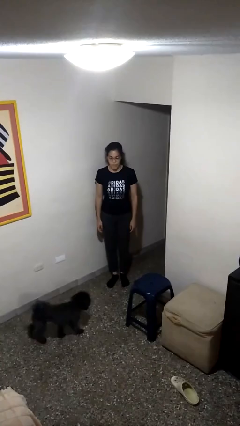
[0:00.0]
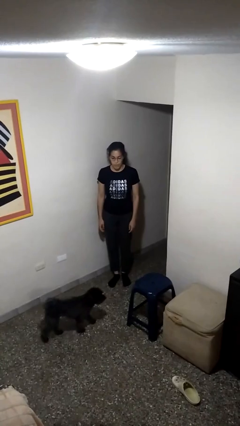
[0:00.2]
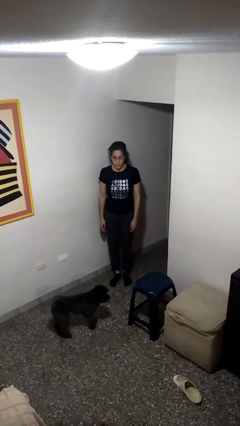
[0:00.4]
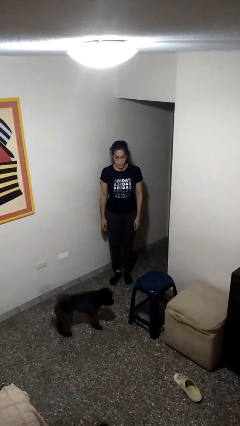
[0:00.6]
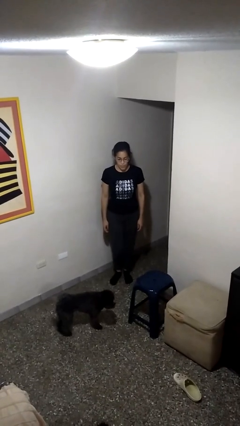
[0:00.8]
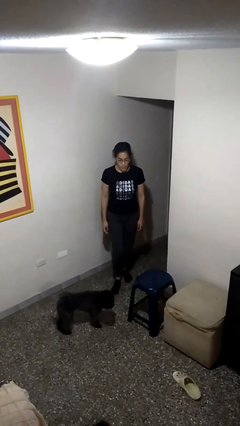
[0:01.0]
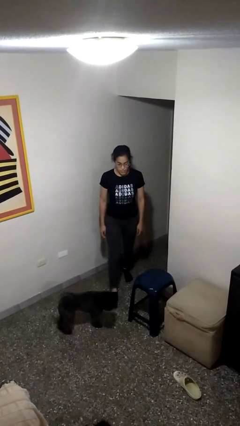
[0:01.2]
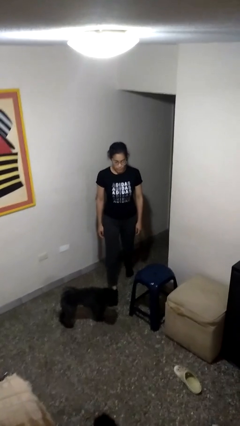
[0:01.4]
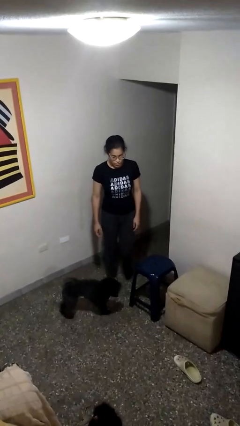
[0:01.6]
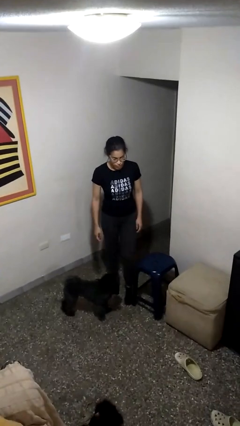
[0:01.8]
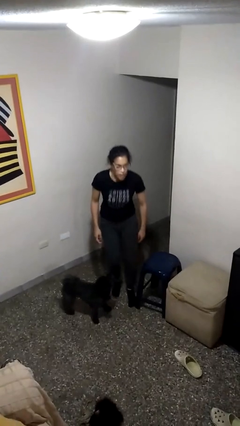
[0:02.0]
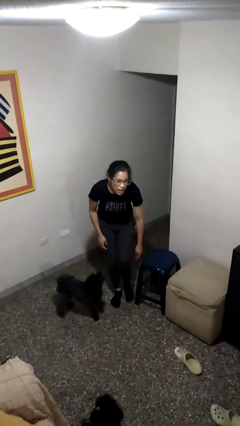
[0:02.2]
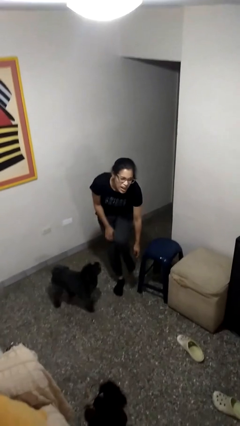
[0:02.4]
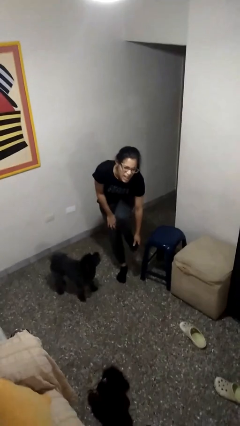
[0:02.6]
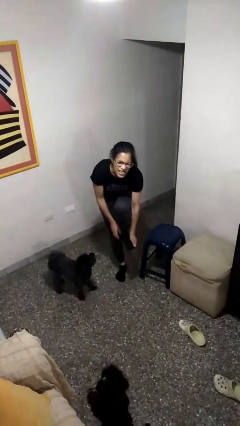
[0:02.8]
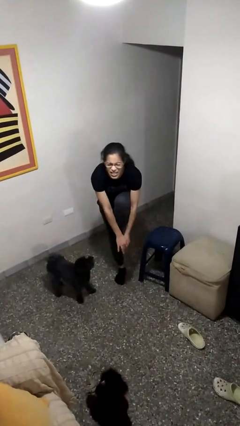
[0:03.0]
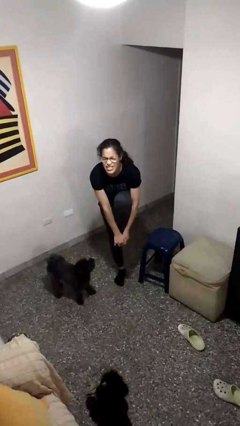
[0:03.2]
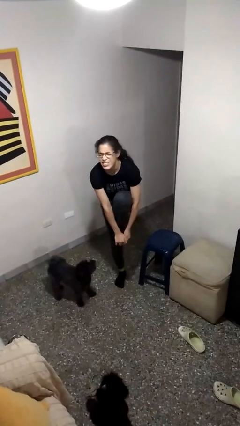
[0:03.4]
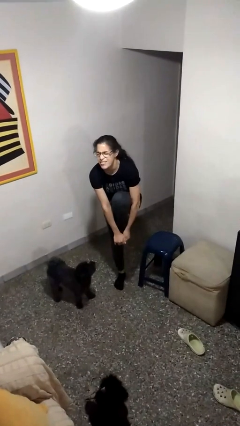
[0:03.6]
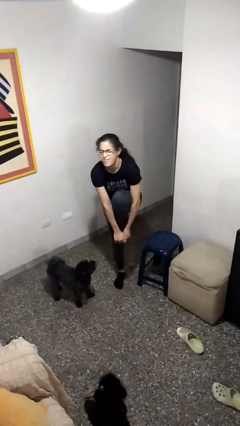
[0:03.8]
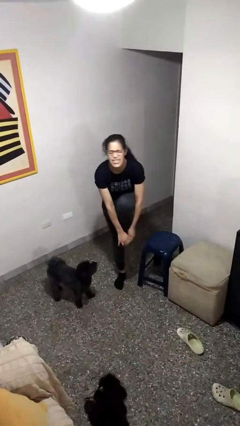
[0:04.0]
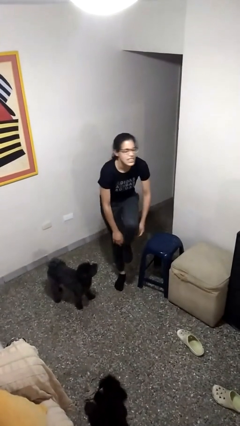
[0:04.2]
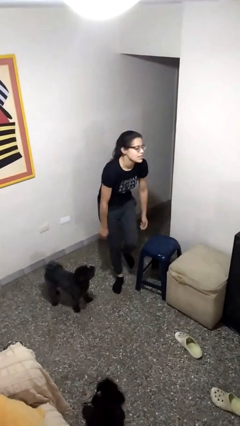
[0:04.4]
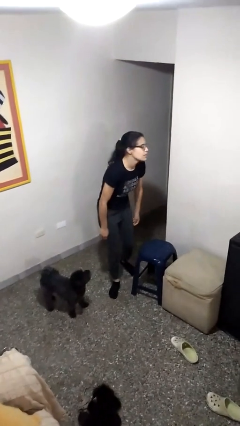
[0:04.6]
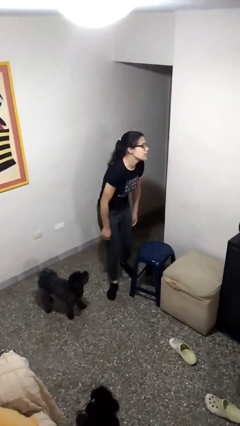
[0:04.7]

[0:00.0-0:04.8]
person stubs toe

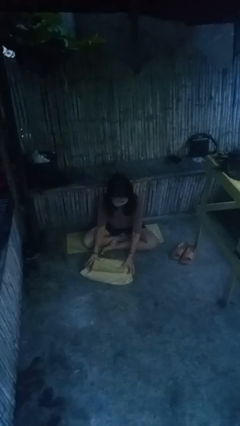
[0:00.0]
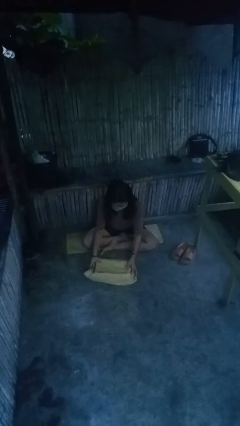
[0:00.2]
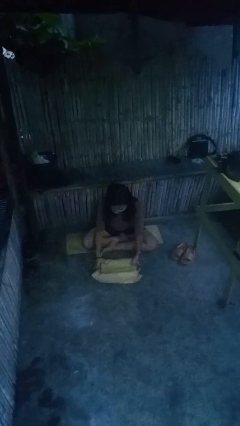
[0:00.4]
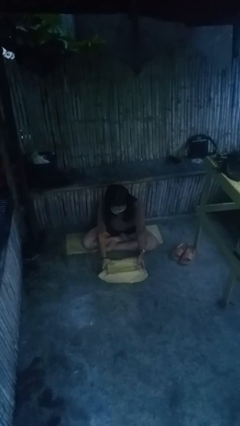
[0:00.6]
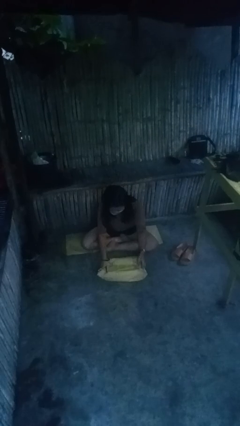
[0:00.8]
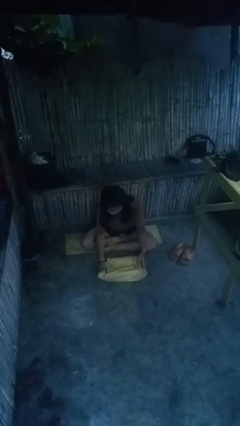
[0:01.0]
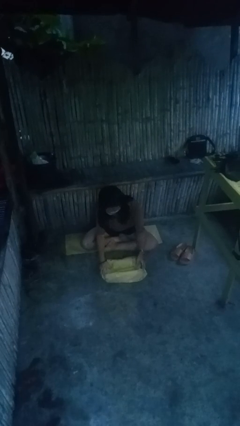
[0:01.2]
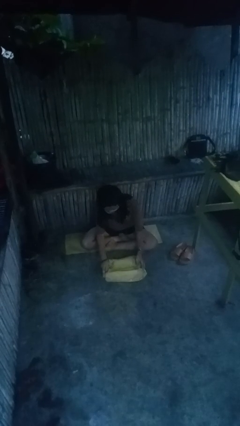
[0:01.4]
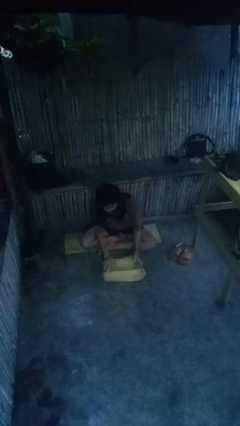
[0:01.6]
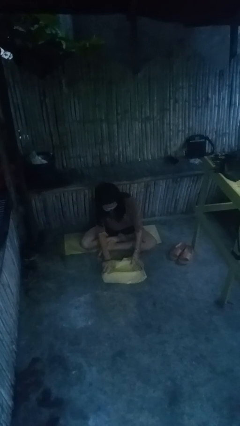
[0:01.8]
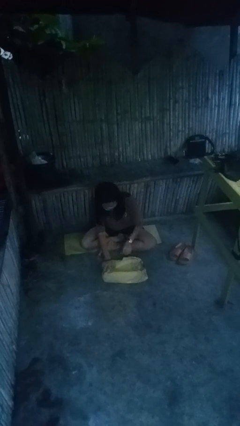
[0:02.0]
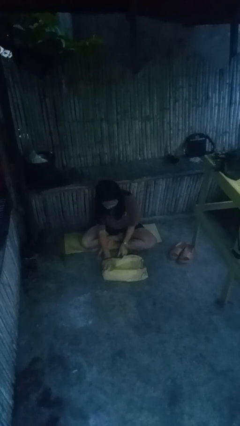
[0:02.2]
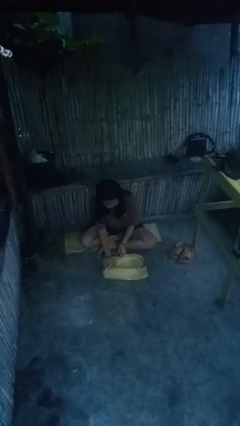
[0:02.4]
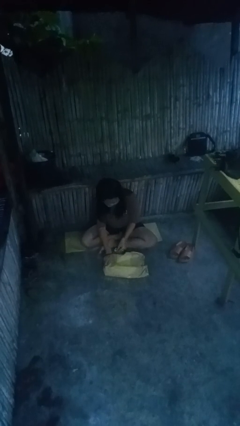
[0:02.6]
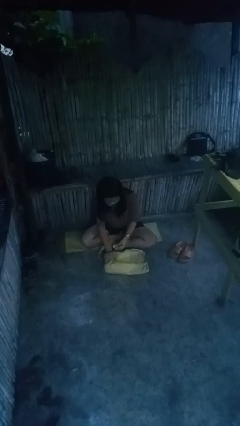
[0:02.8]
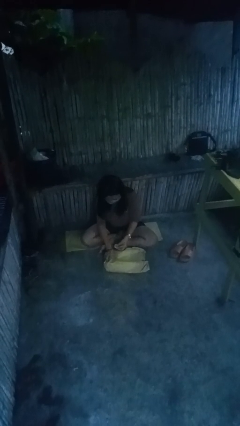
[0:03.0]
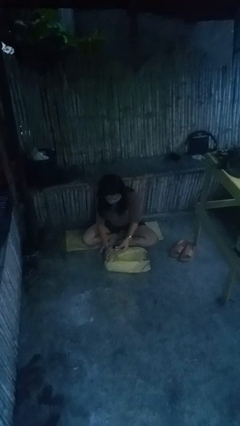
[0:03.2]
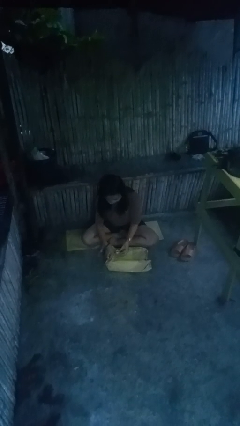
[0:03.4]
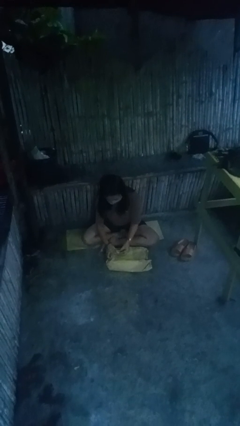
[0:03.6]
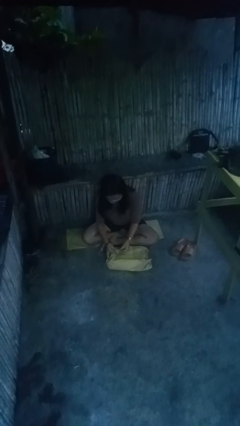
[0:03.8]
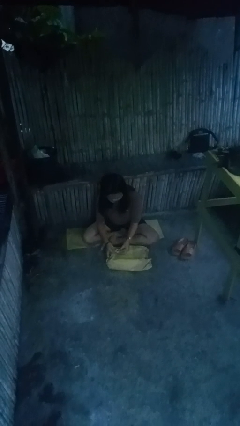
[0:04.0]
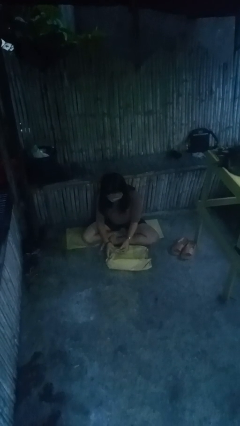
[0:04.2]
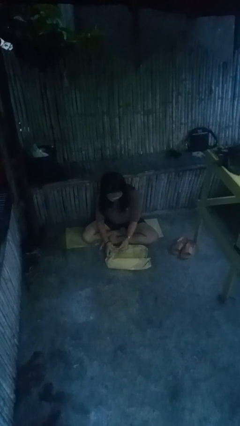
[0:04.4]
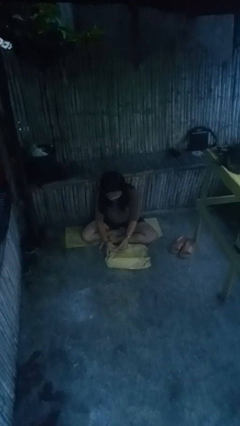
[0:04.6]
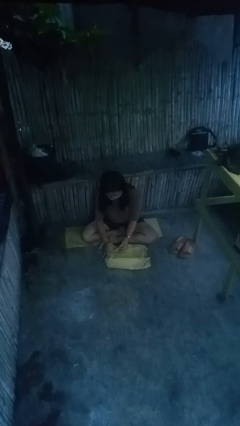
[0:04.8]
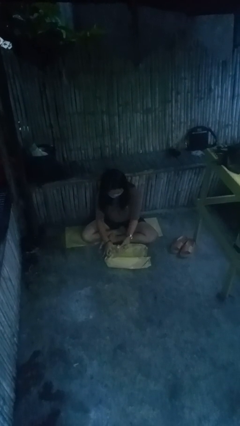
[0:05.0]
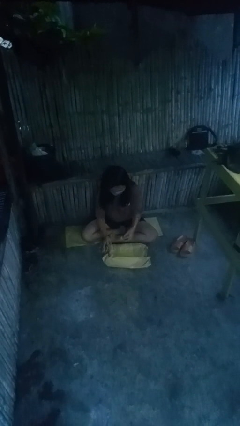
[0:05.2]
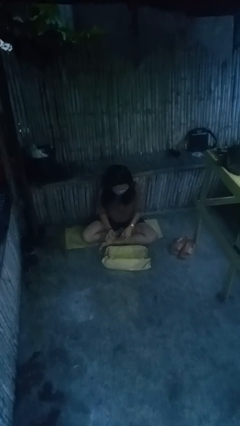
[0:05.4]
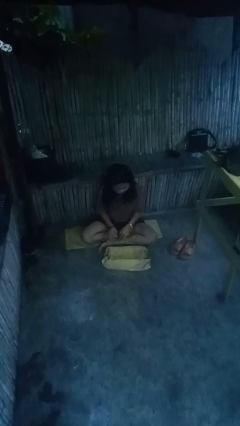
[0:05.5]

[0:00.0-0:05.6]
person wraps box

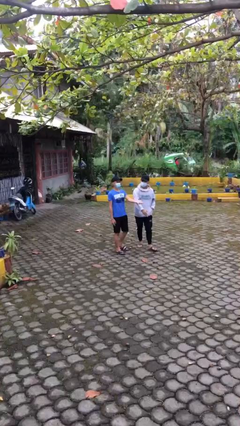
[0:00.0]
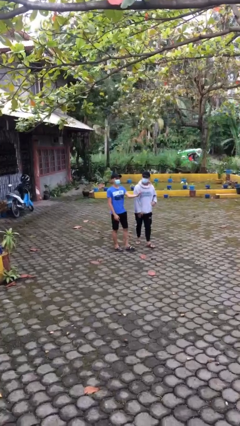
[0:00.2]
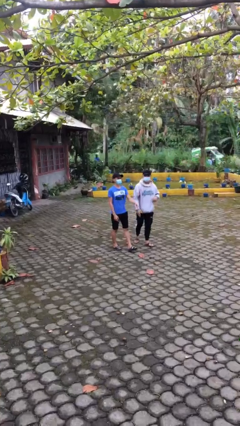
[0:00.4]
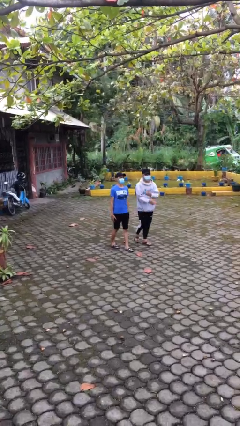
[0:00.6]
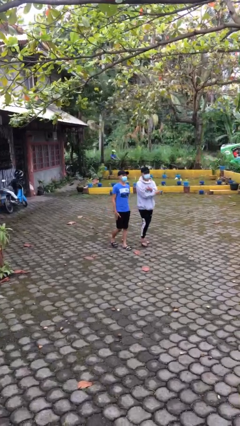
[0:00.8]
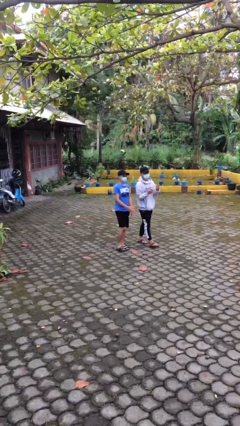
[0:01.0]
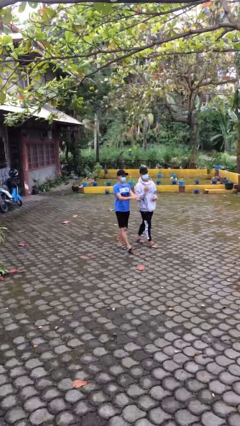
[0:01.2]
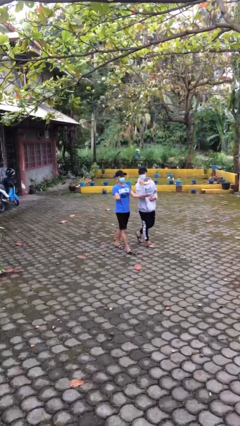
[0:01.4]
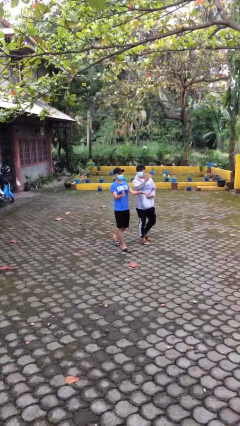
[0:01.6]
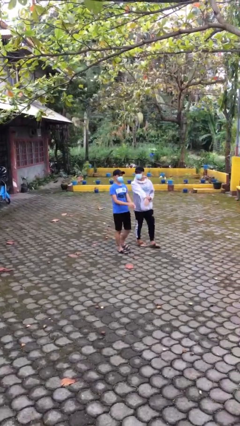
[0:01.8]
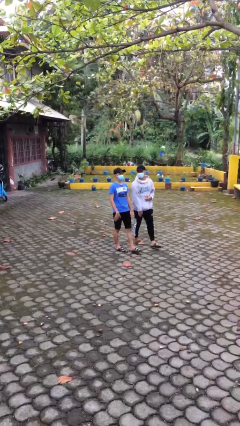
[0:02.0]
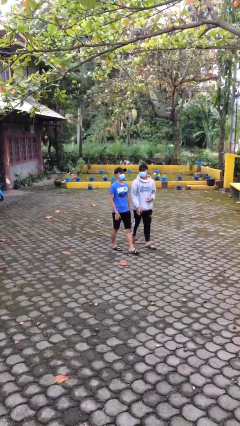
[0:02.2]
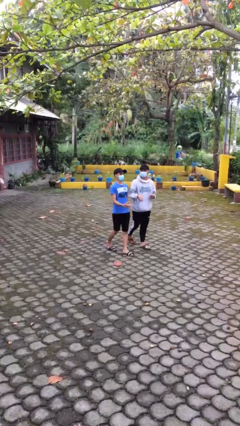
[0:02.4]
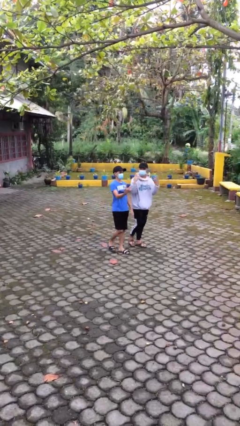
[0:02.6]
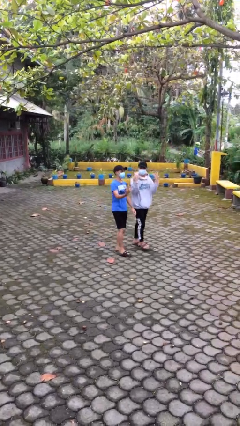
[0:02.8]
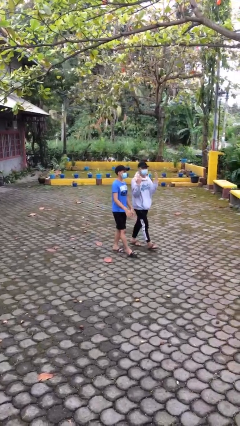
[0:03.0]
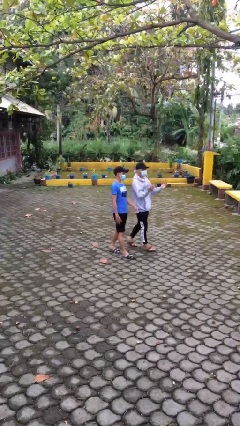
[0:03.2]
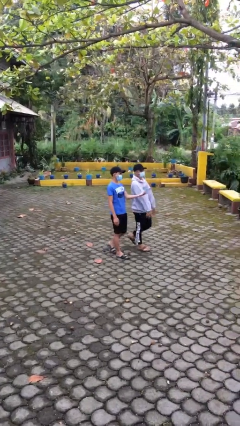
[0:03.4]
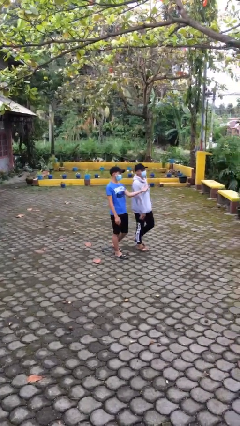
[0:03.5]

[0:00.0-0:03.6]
person talks to person

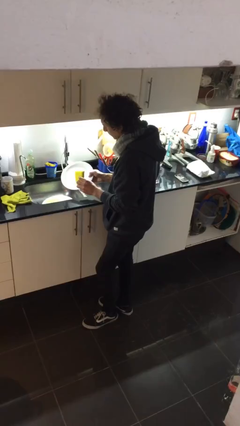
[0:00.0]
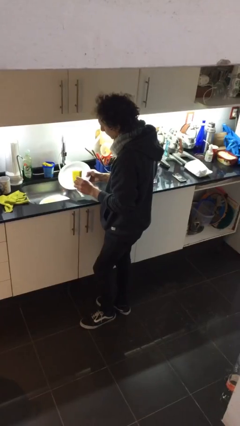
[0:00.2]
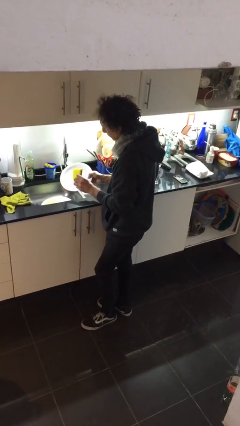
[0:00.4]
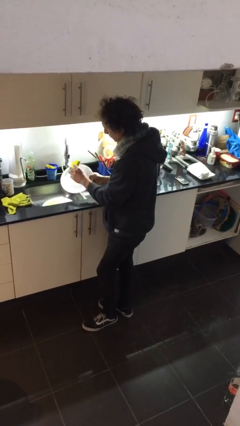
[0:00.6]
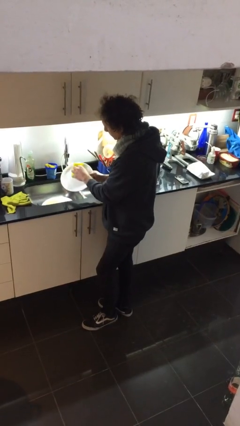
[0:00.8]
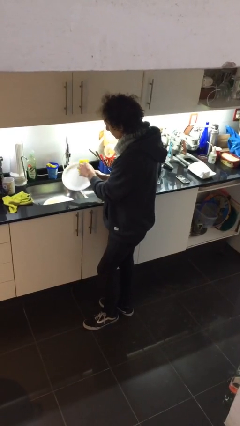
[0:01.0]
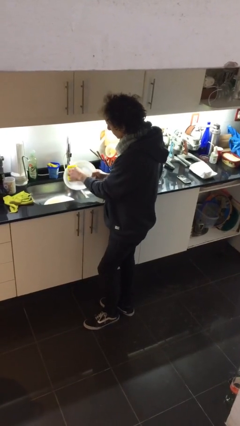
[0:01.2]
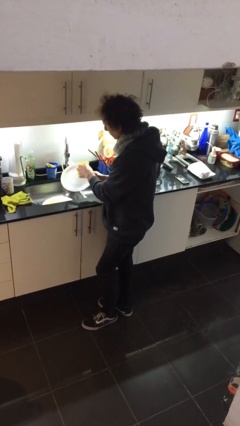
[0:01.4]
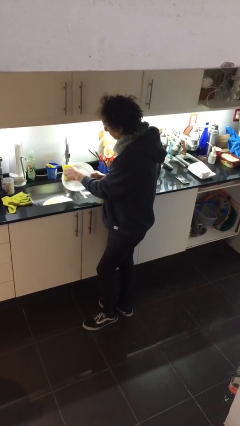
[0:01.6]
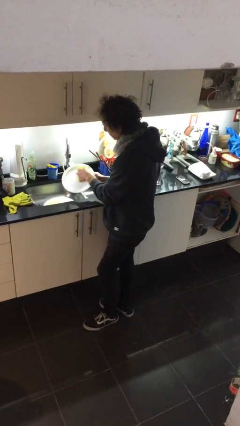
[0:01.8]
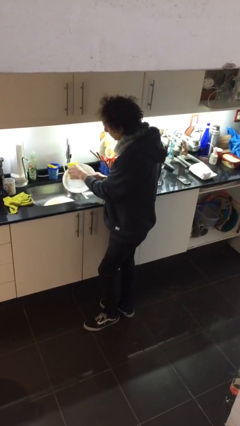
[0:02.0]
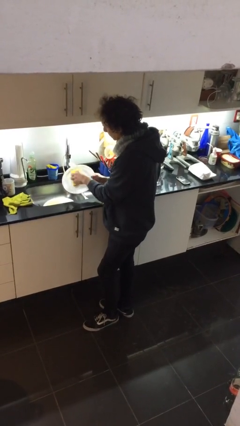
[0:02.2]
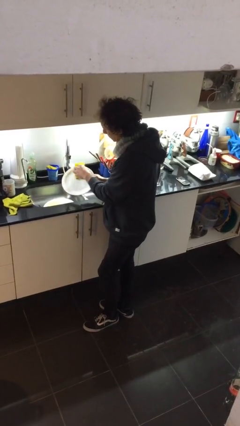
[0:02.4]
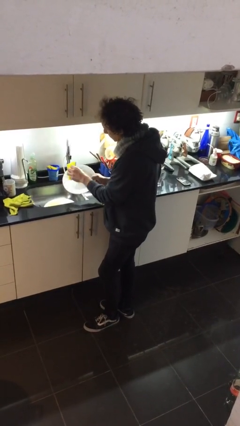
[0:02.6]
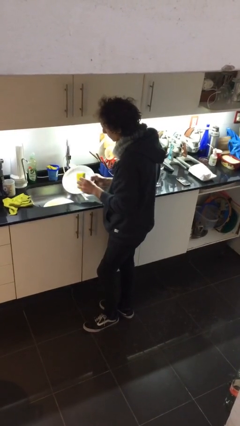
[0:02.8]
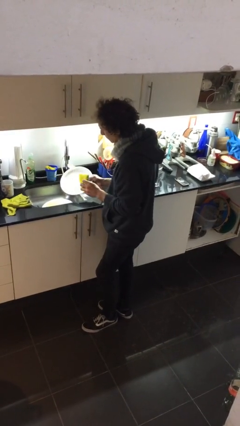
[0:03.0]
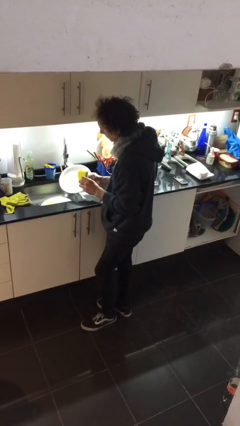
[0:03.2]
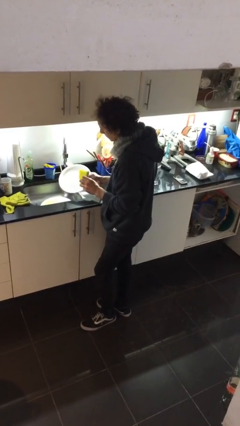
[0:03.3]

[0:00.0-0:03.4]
person washes dish

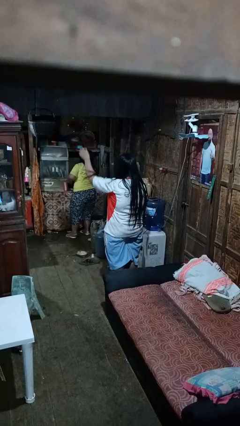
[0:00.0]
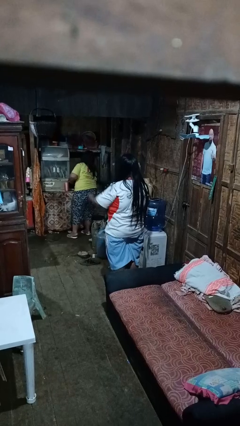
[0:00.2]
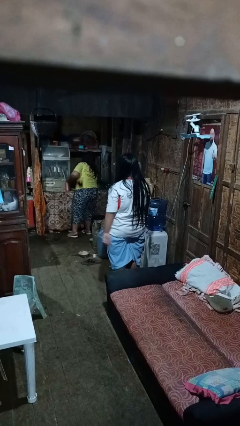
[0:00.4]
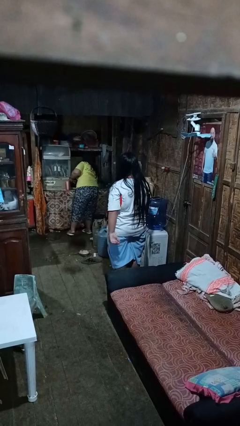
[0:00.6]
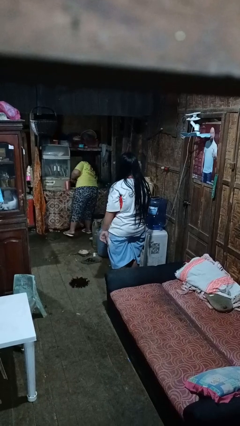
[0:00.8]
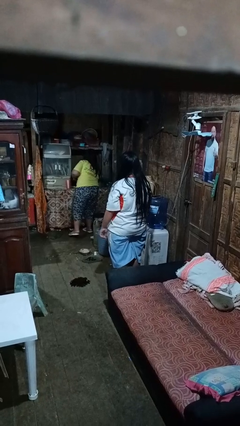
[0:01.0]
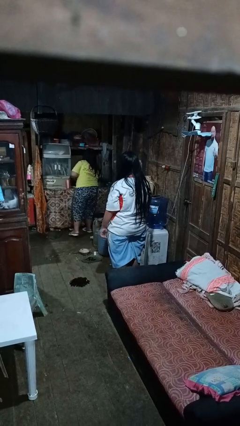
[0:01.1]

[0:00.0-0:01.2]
person throws object into air
